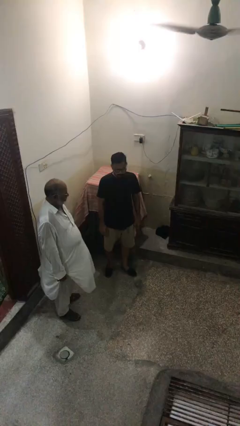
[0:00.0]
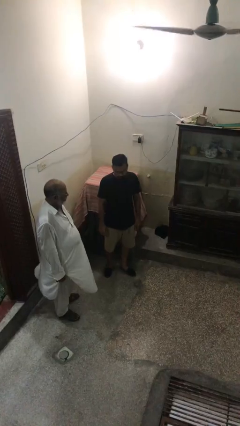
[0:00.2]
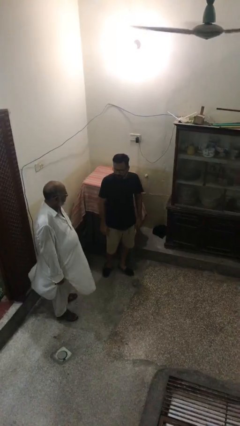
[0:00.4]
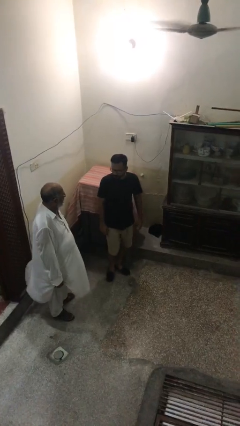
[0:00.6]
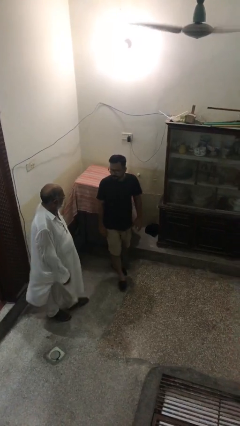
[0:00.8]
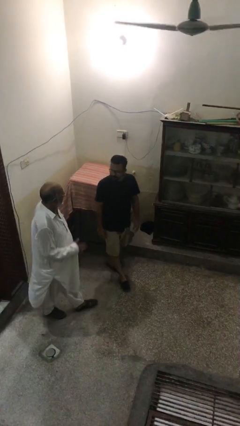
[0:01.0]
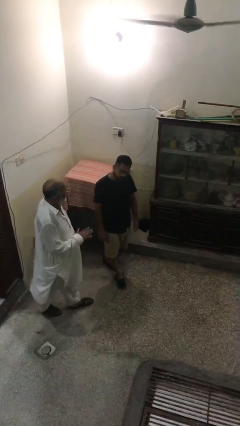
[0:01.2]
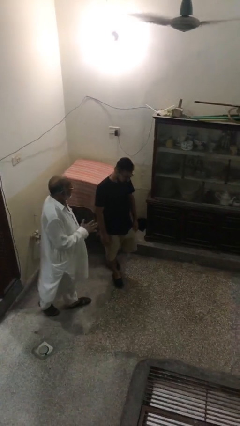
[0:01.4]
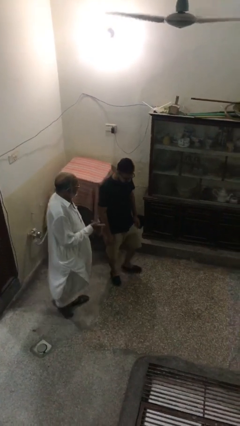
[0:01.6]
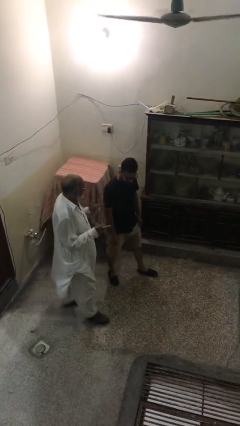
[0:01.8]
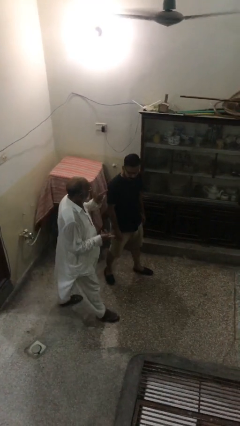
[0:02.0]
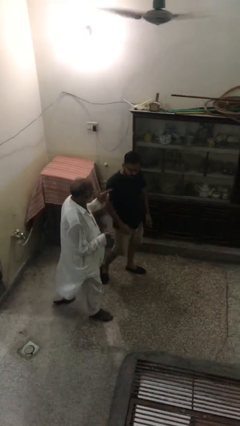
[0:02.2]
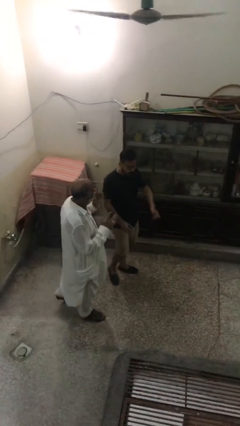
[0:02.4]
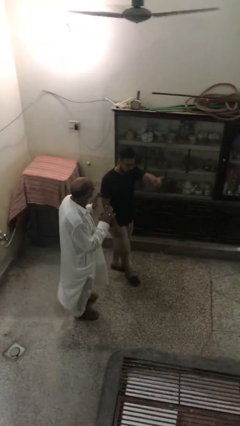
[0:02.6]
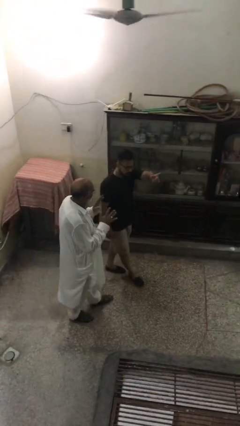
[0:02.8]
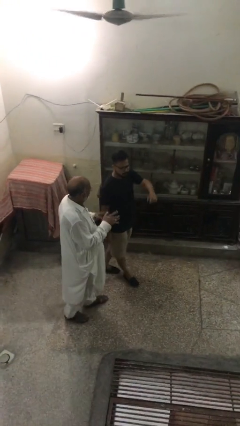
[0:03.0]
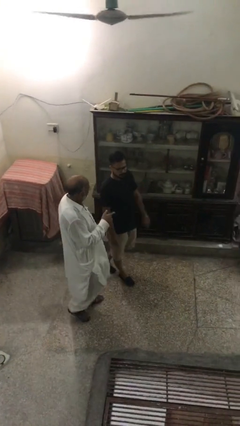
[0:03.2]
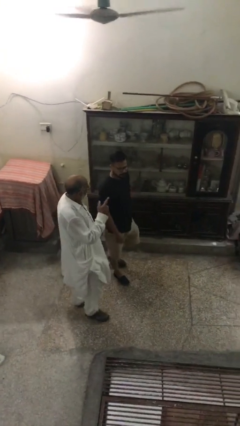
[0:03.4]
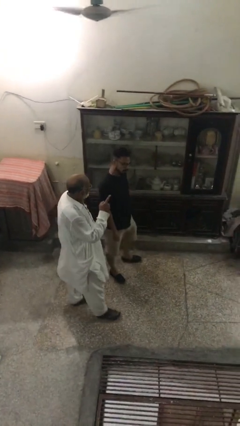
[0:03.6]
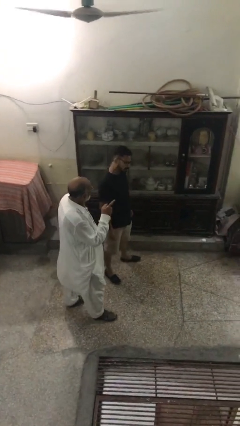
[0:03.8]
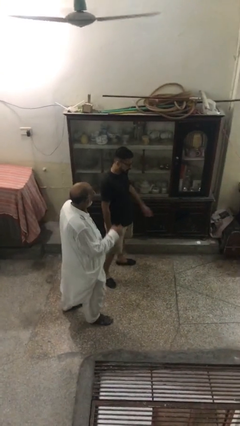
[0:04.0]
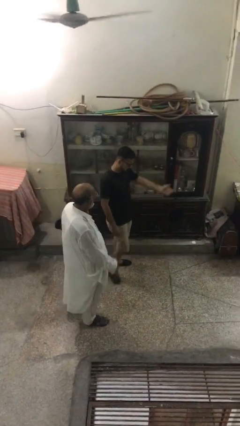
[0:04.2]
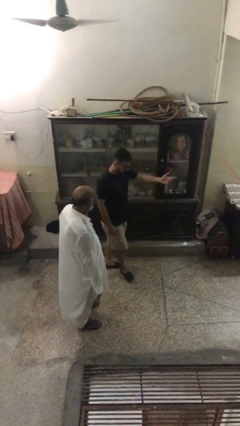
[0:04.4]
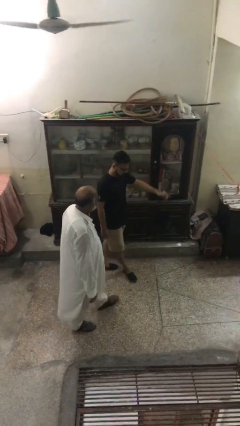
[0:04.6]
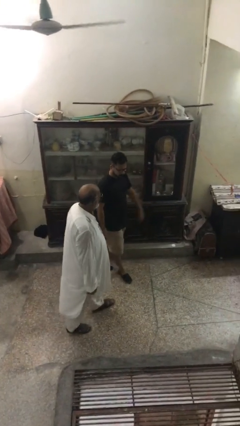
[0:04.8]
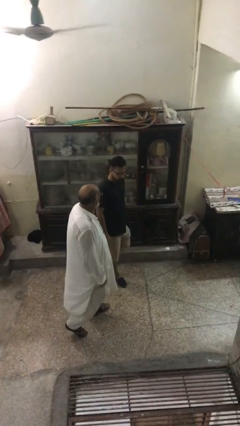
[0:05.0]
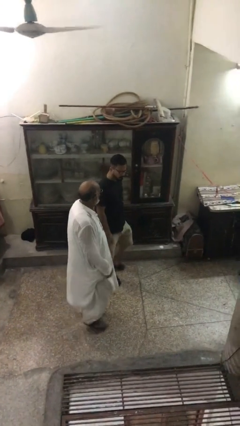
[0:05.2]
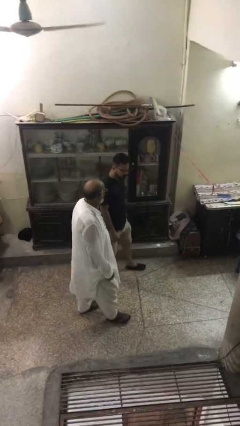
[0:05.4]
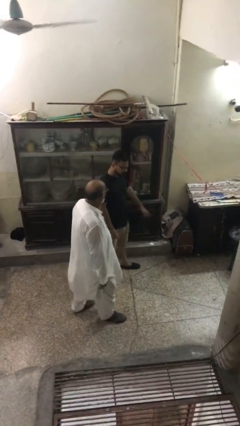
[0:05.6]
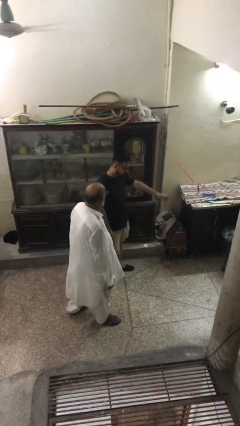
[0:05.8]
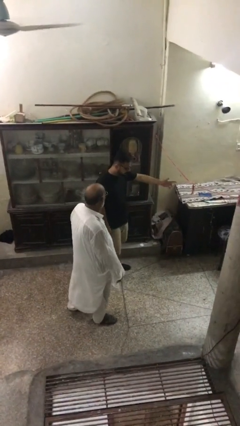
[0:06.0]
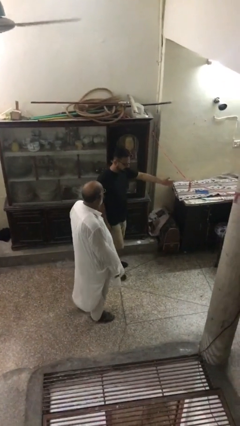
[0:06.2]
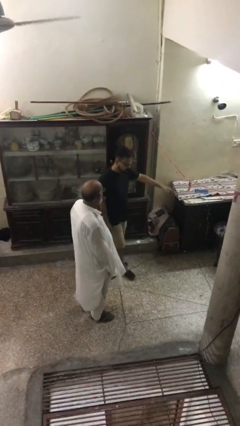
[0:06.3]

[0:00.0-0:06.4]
person talks to person

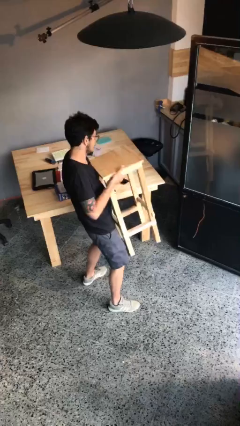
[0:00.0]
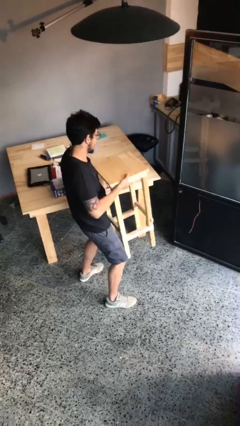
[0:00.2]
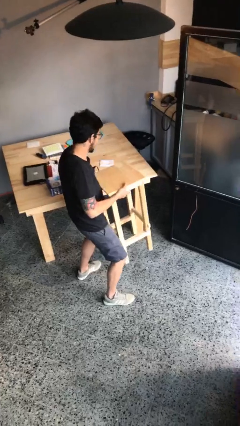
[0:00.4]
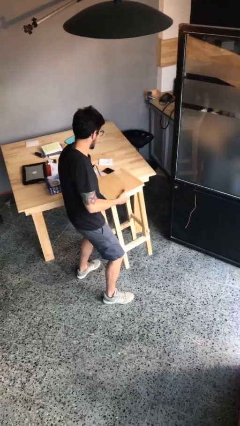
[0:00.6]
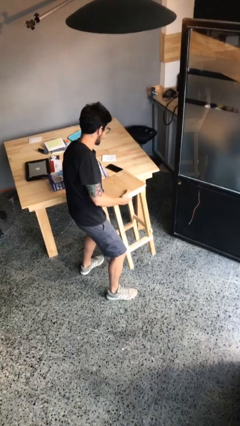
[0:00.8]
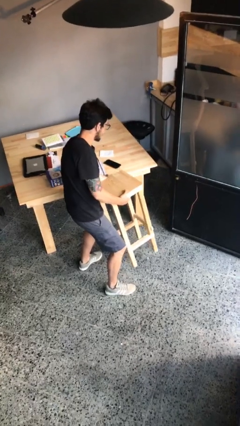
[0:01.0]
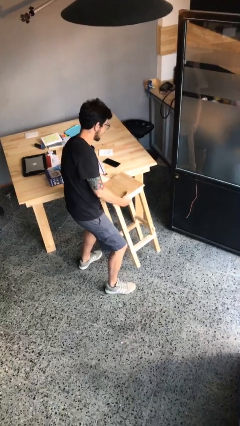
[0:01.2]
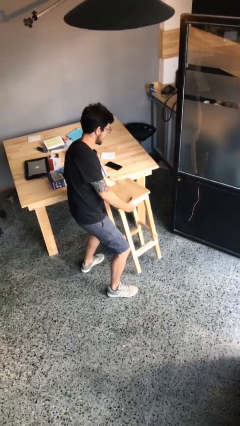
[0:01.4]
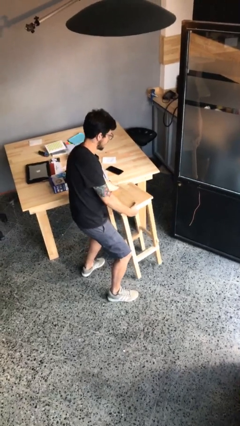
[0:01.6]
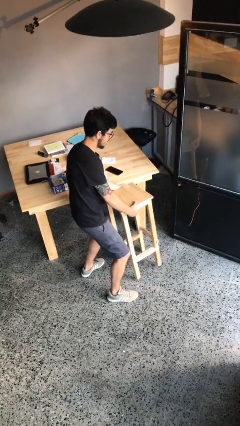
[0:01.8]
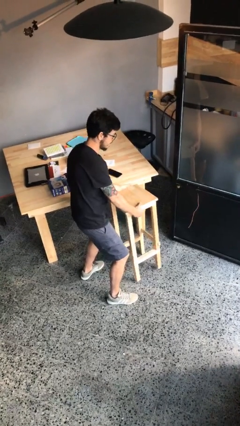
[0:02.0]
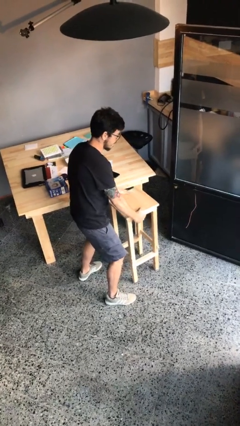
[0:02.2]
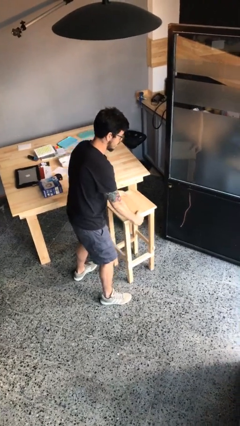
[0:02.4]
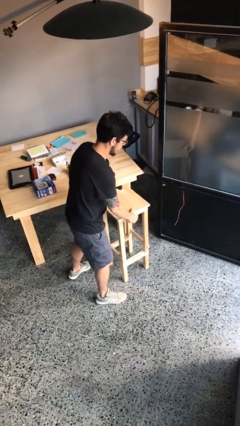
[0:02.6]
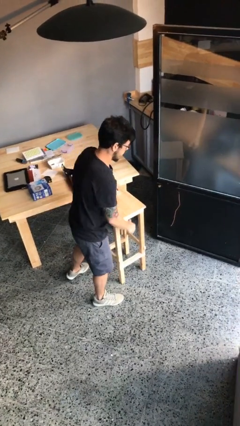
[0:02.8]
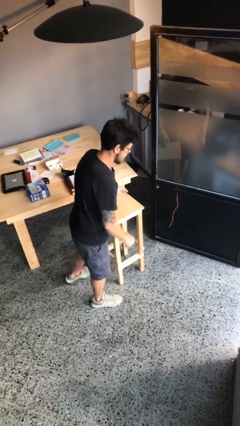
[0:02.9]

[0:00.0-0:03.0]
person puts down object on floor

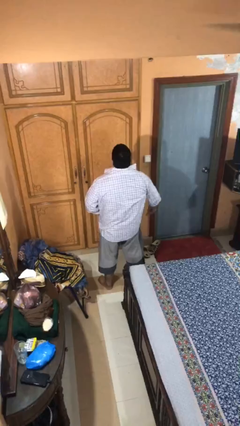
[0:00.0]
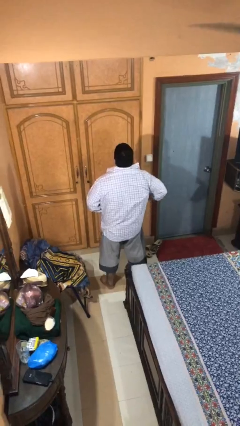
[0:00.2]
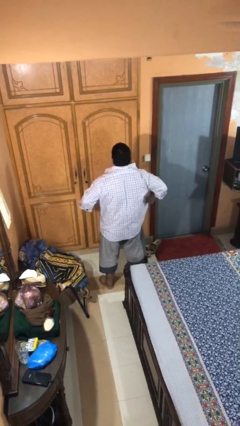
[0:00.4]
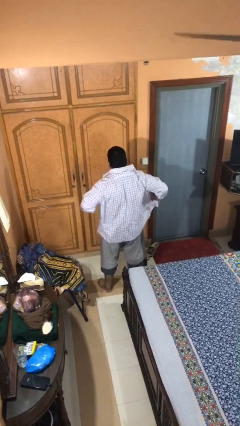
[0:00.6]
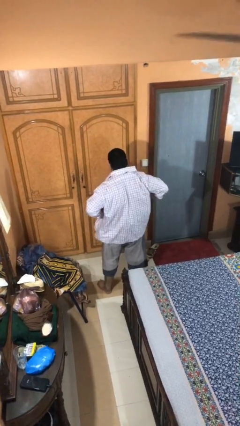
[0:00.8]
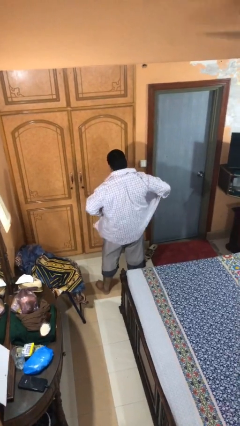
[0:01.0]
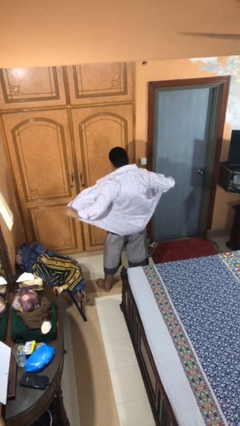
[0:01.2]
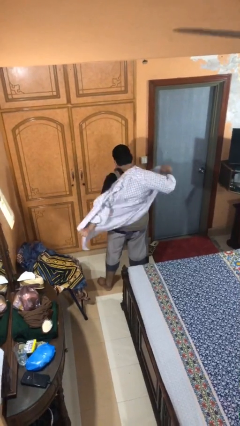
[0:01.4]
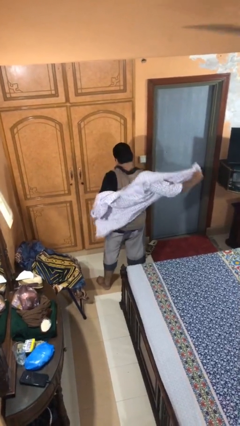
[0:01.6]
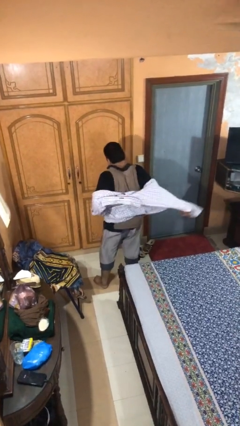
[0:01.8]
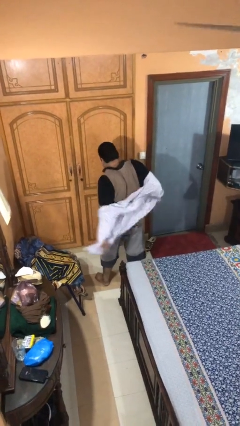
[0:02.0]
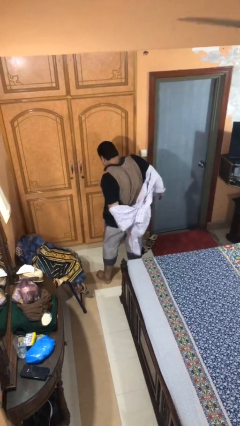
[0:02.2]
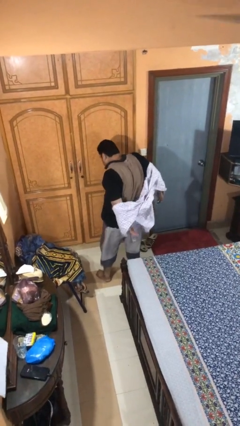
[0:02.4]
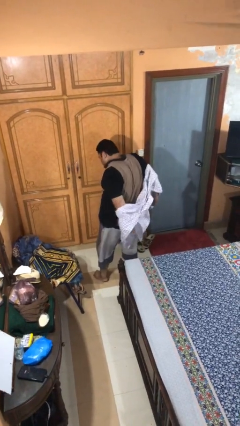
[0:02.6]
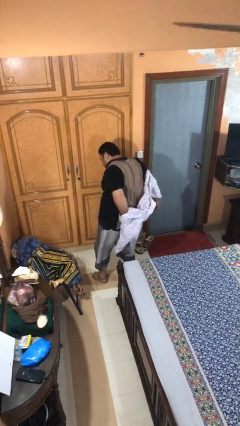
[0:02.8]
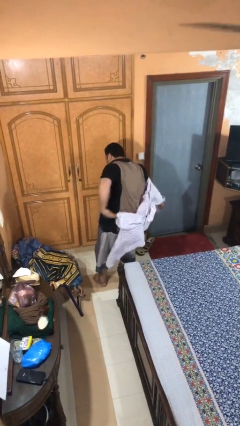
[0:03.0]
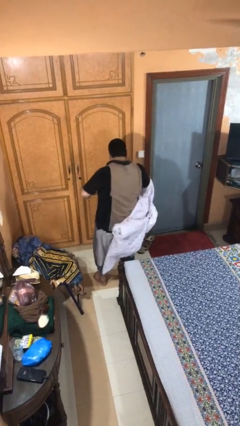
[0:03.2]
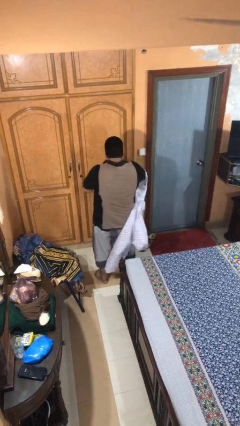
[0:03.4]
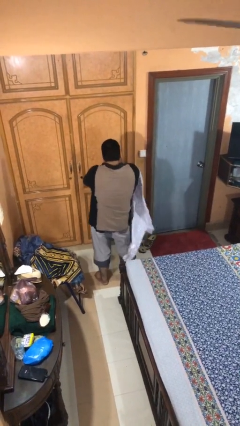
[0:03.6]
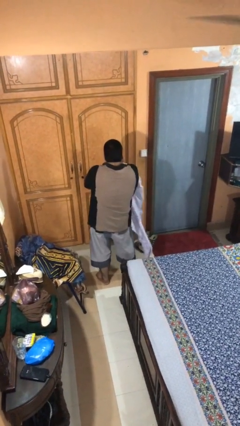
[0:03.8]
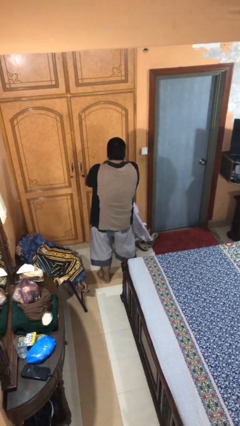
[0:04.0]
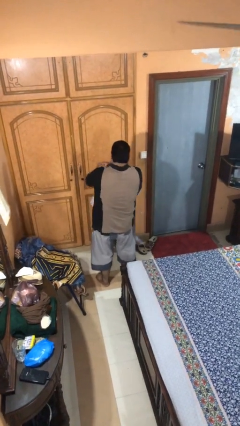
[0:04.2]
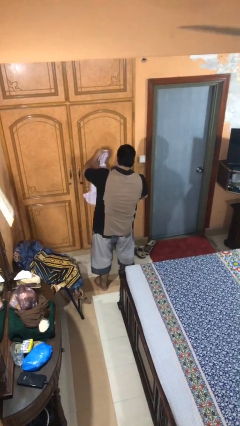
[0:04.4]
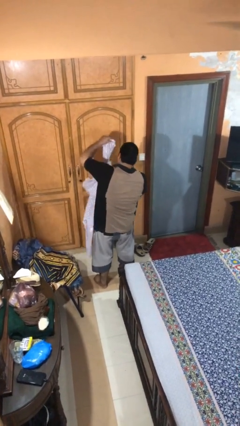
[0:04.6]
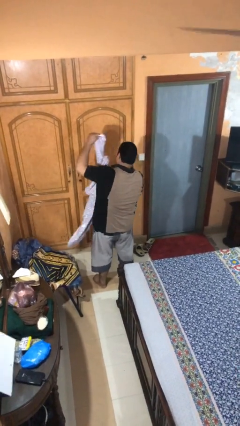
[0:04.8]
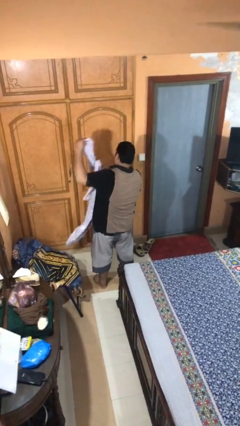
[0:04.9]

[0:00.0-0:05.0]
person takes off shirt

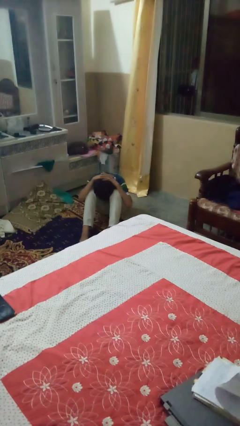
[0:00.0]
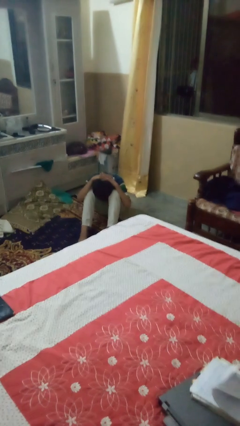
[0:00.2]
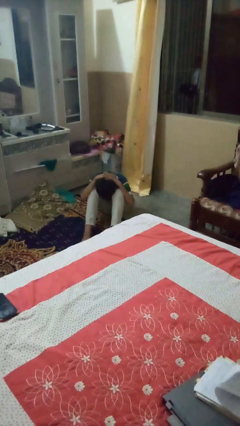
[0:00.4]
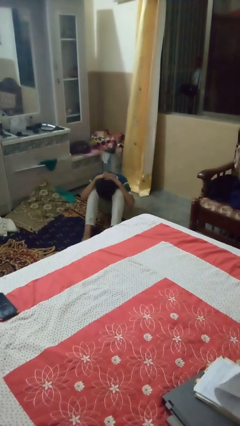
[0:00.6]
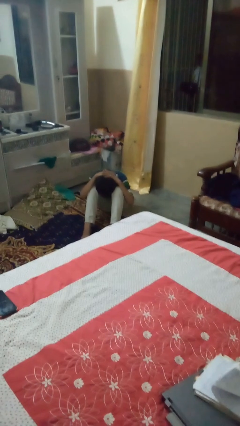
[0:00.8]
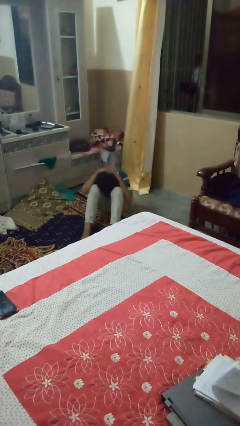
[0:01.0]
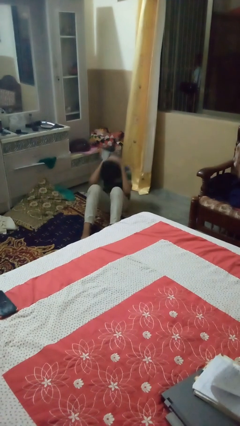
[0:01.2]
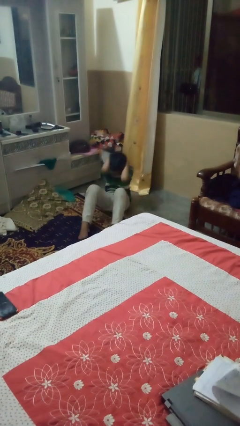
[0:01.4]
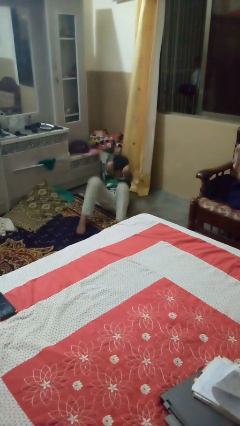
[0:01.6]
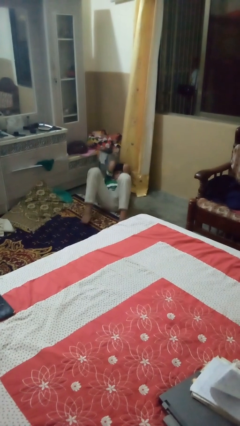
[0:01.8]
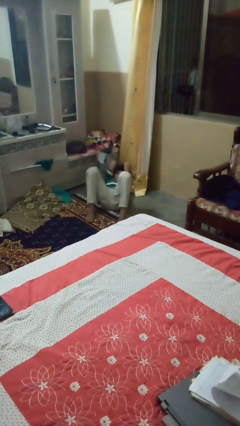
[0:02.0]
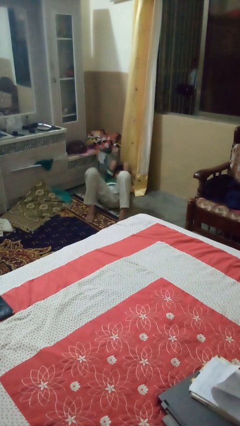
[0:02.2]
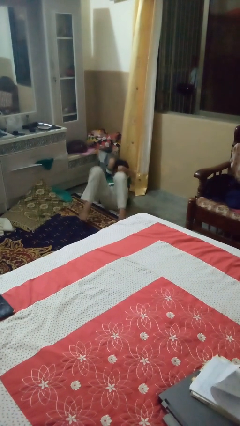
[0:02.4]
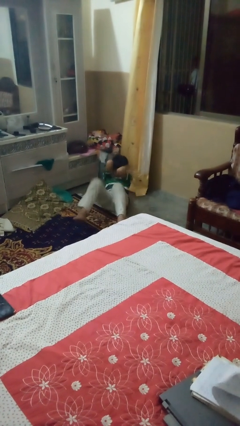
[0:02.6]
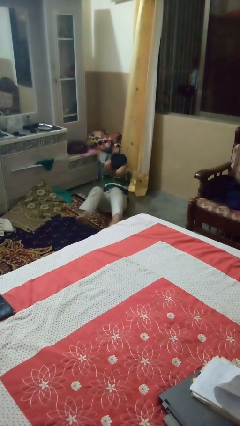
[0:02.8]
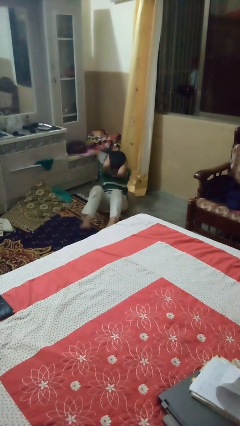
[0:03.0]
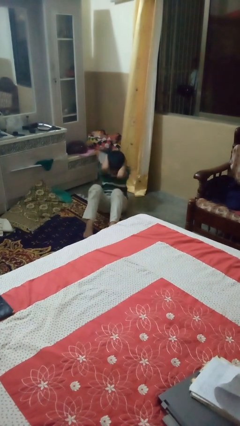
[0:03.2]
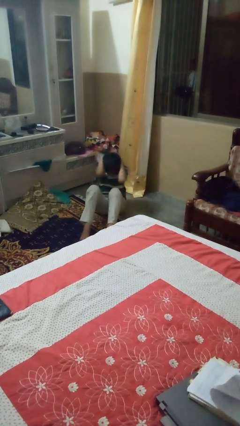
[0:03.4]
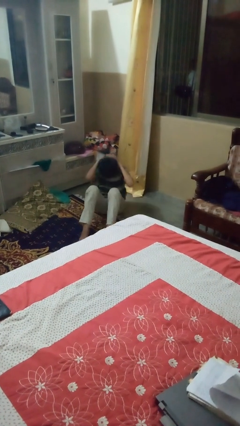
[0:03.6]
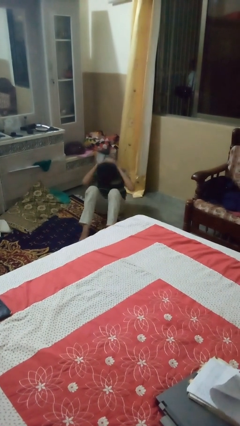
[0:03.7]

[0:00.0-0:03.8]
person exercises with situp
